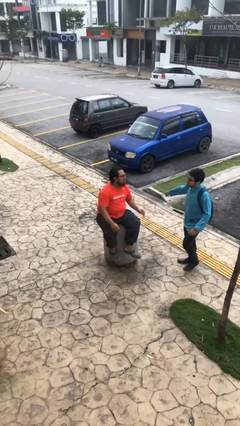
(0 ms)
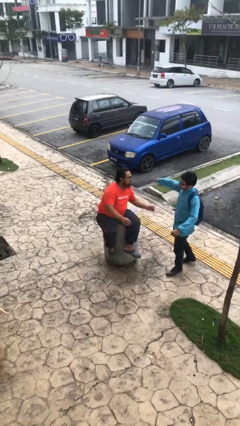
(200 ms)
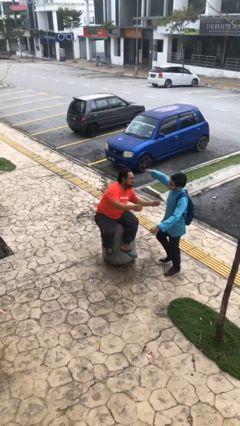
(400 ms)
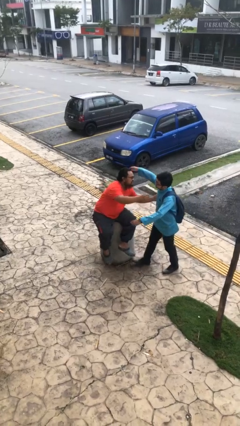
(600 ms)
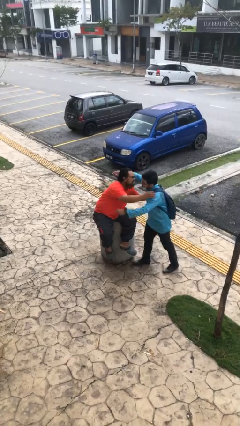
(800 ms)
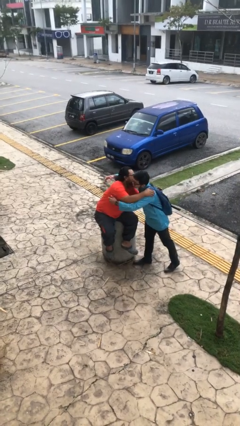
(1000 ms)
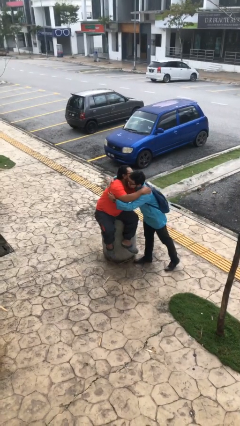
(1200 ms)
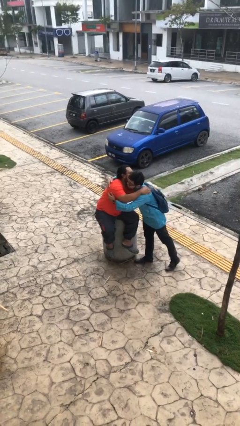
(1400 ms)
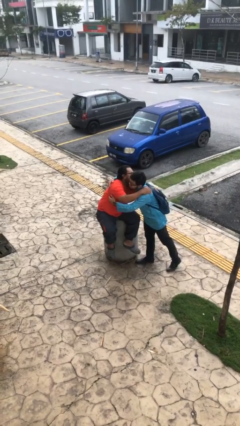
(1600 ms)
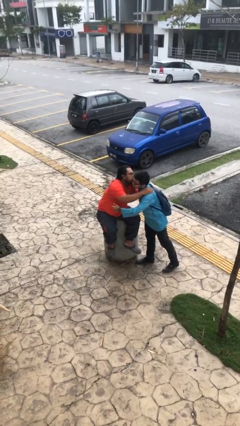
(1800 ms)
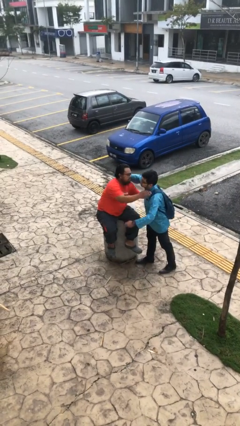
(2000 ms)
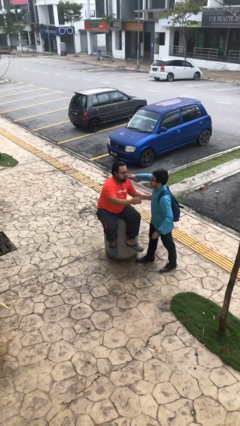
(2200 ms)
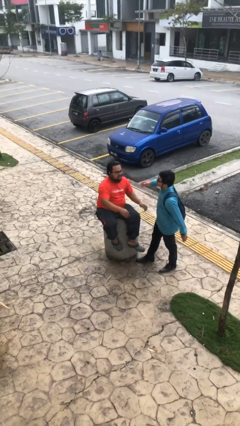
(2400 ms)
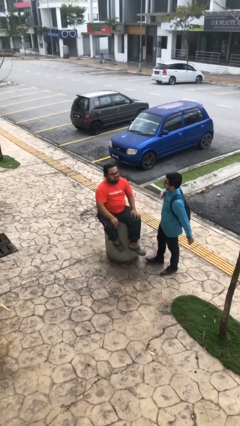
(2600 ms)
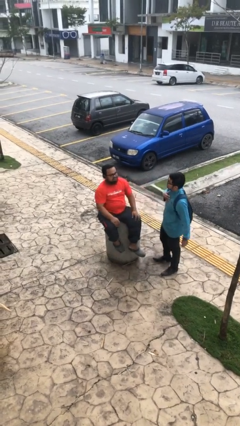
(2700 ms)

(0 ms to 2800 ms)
person embraces person

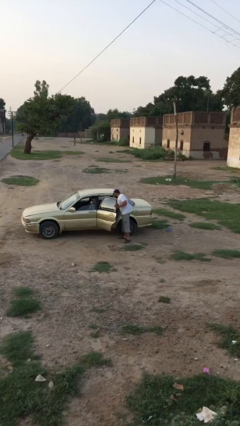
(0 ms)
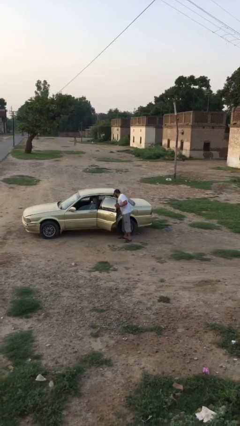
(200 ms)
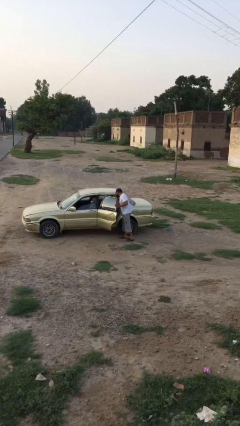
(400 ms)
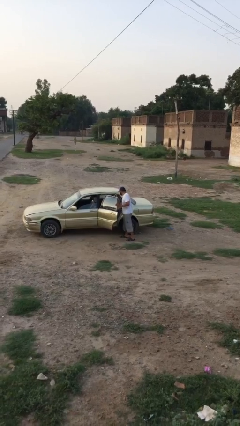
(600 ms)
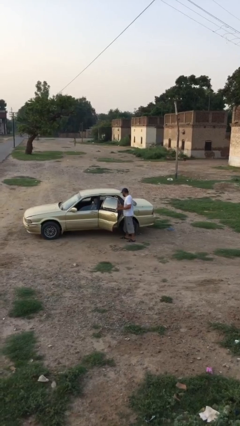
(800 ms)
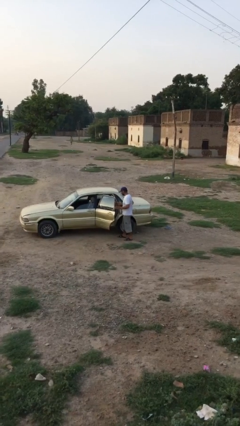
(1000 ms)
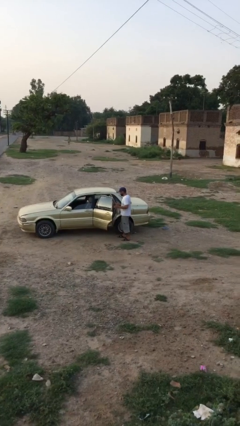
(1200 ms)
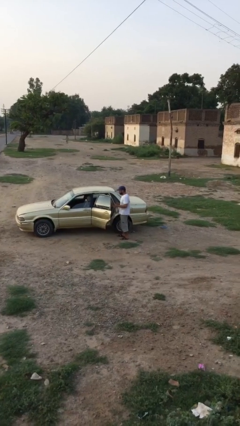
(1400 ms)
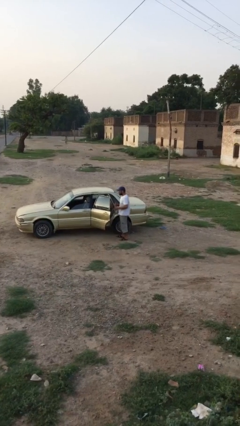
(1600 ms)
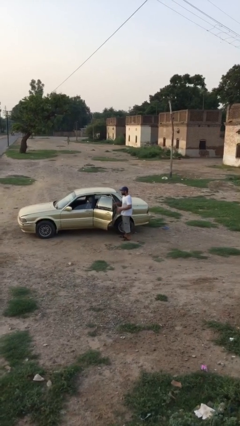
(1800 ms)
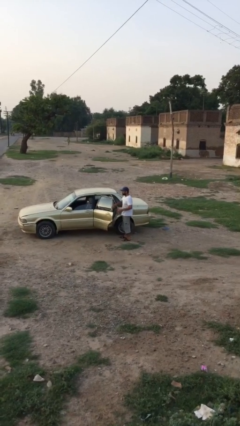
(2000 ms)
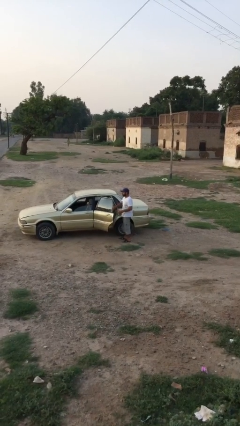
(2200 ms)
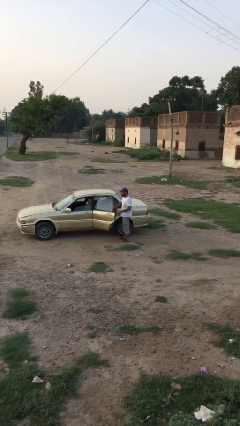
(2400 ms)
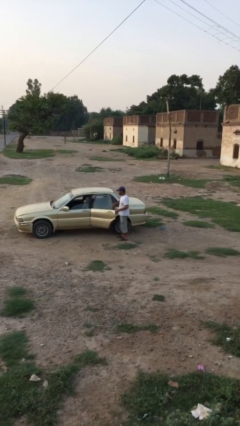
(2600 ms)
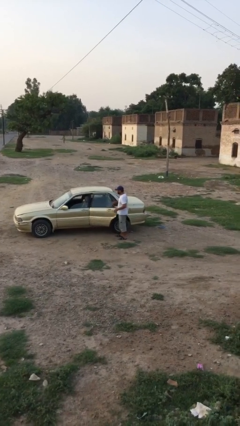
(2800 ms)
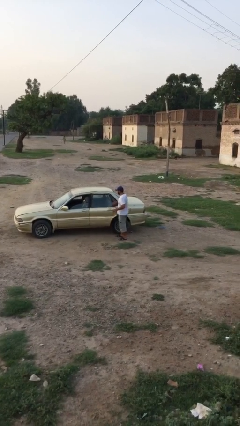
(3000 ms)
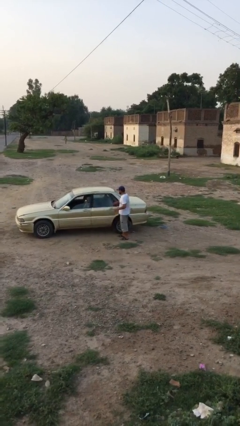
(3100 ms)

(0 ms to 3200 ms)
person closes car door

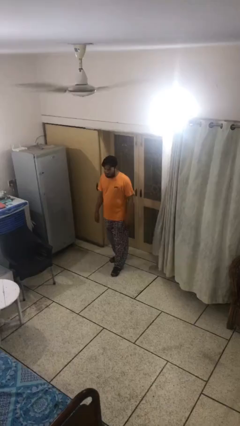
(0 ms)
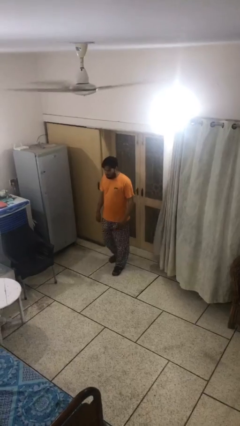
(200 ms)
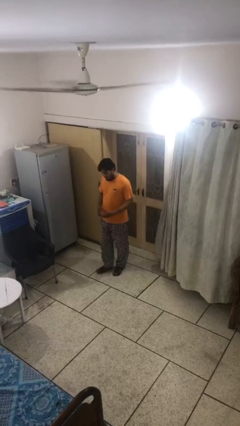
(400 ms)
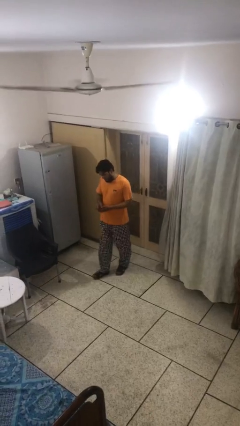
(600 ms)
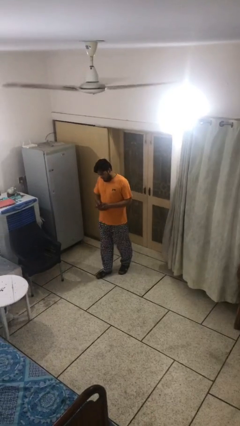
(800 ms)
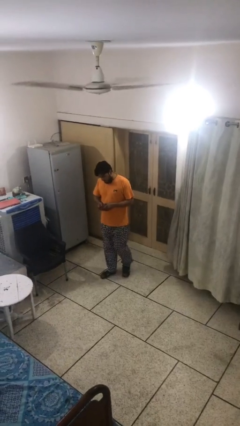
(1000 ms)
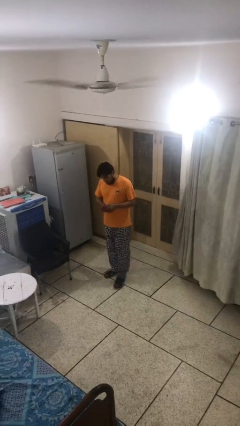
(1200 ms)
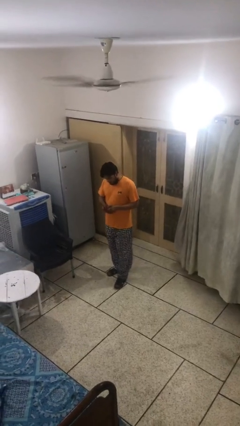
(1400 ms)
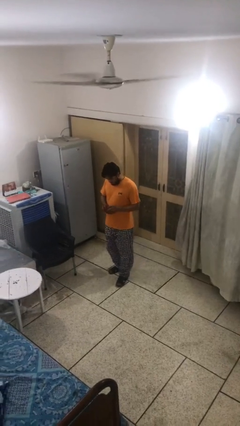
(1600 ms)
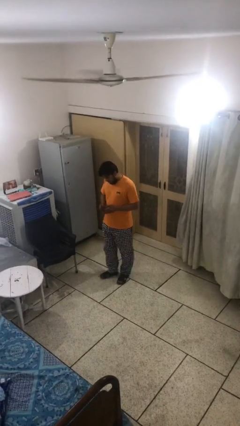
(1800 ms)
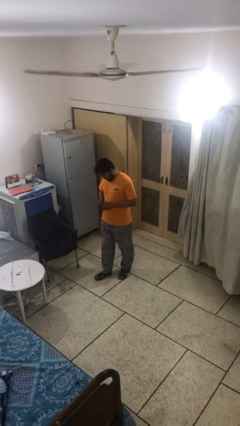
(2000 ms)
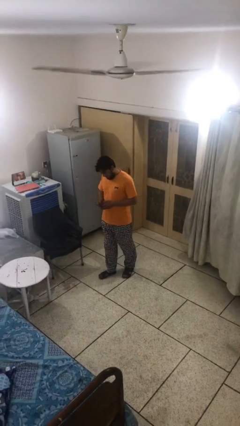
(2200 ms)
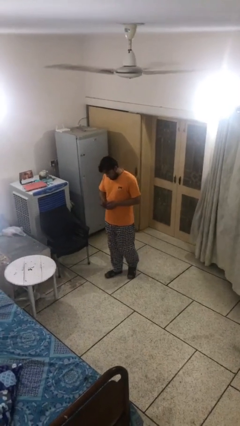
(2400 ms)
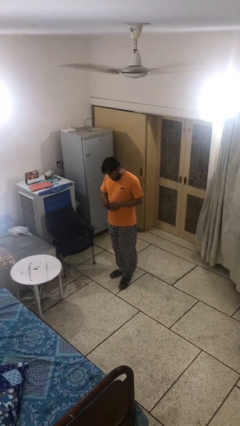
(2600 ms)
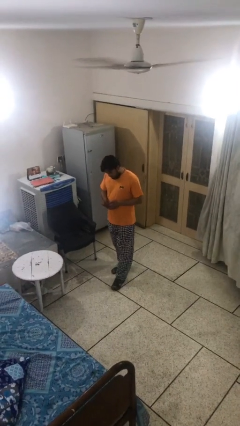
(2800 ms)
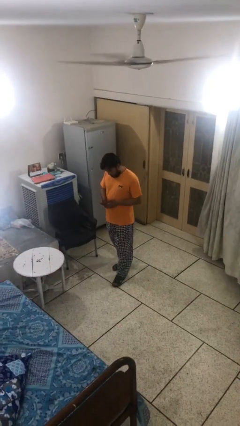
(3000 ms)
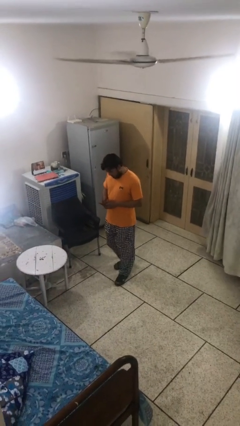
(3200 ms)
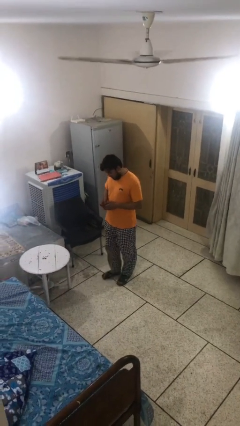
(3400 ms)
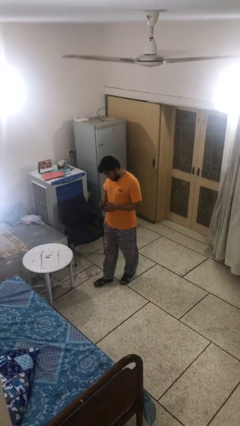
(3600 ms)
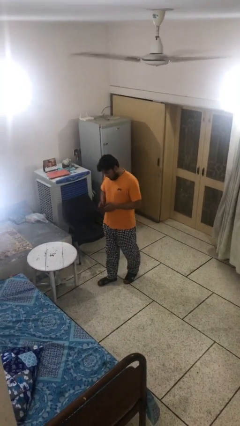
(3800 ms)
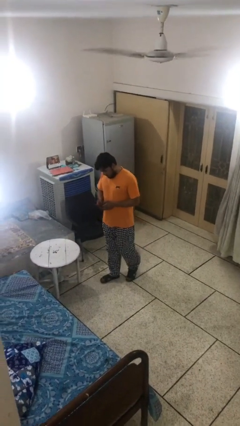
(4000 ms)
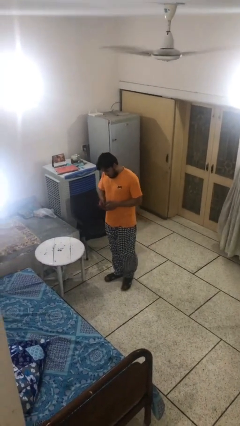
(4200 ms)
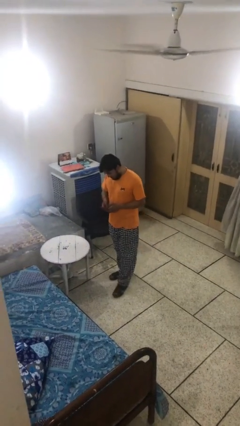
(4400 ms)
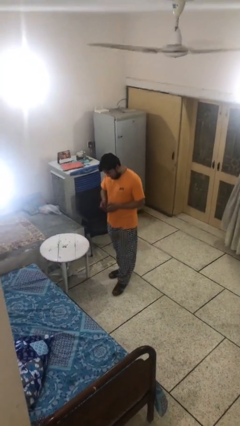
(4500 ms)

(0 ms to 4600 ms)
person texts on phone

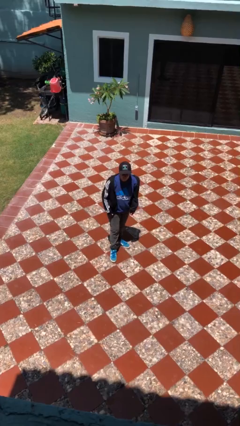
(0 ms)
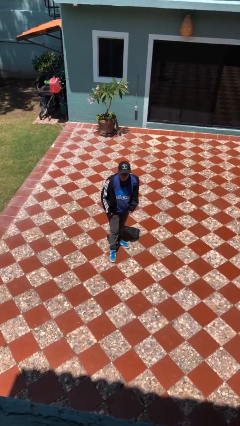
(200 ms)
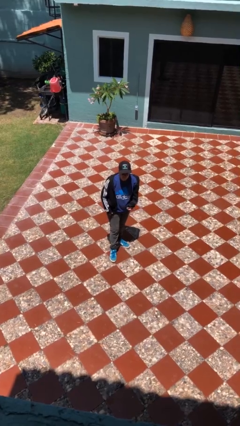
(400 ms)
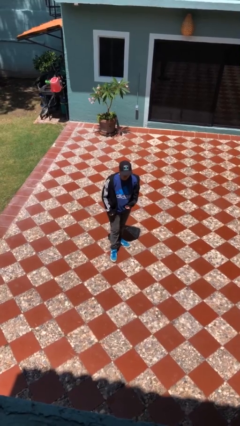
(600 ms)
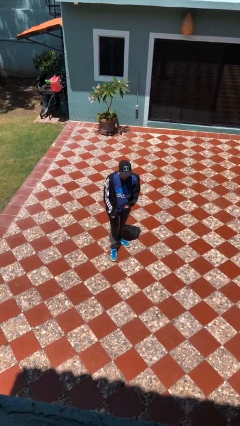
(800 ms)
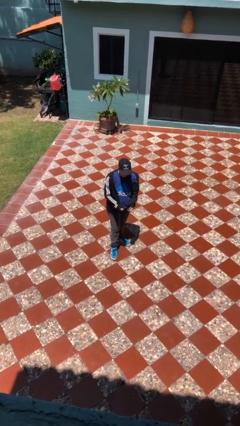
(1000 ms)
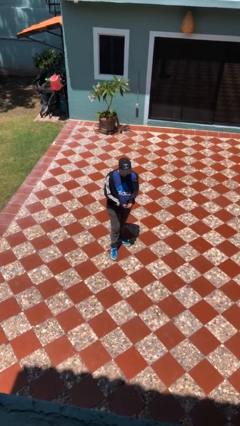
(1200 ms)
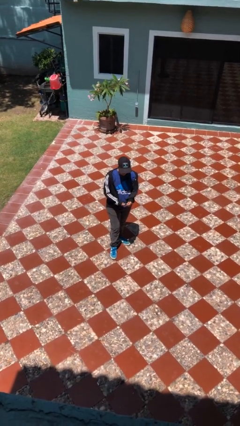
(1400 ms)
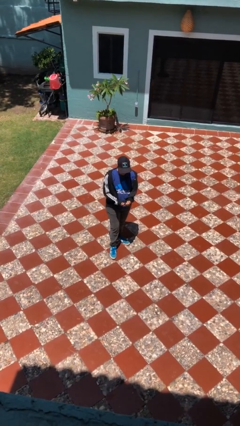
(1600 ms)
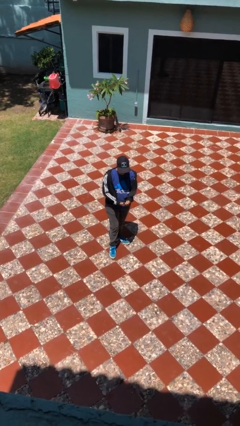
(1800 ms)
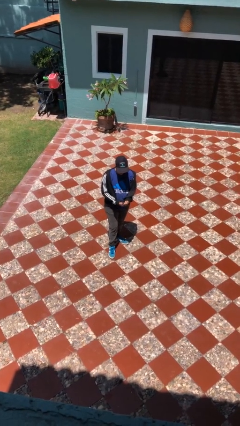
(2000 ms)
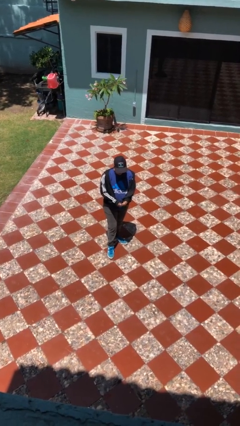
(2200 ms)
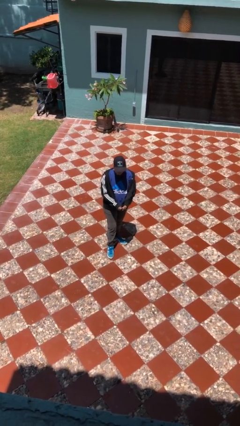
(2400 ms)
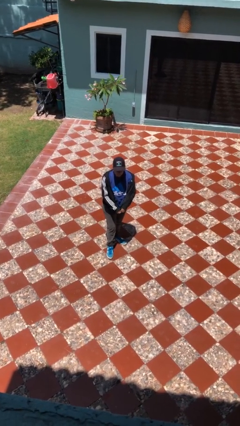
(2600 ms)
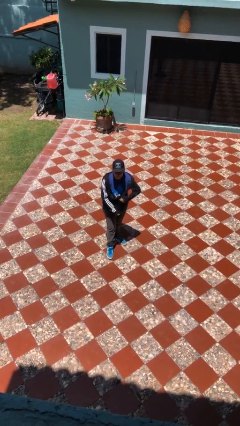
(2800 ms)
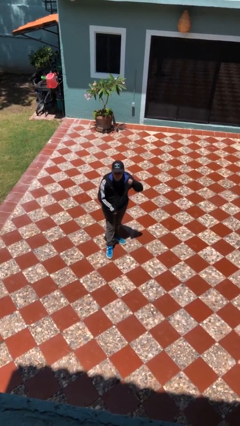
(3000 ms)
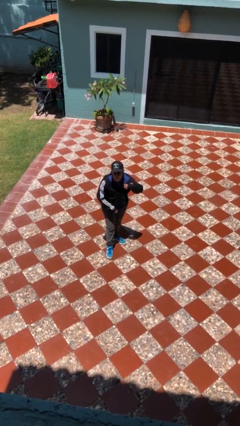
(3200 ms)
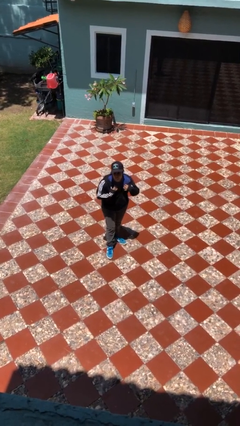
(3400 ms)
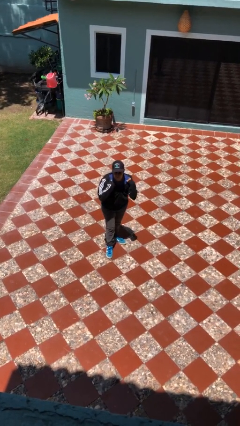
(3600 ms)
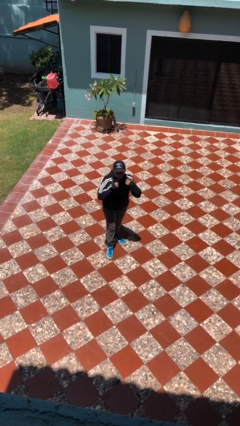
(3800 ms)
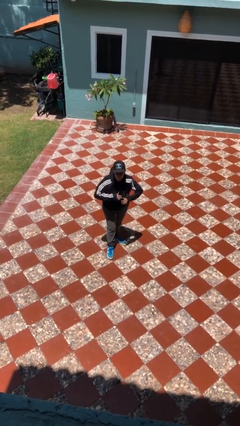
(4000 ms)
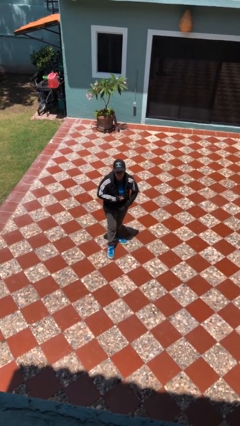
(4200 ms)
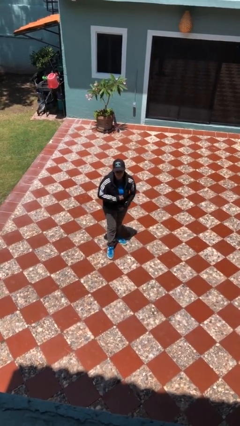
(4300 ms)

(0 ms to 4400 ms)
person zips up jacket

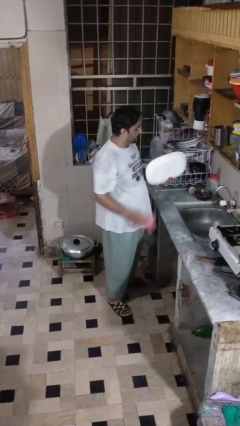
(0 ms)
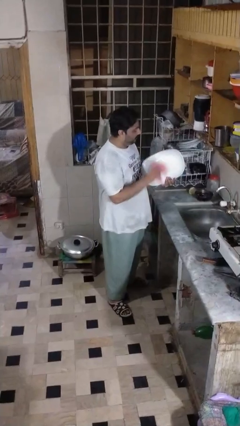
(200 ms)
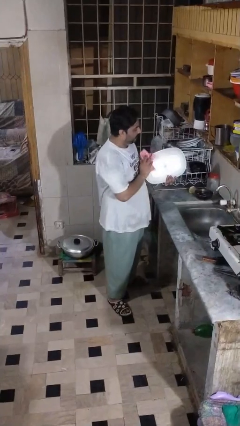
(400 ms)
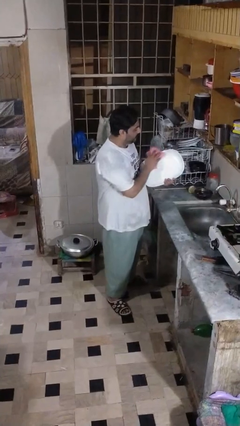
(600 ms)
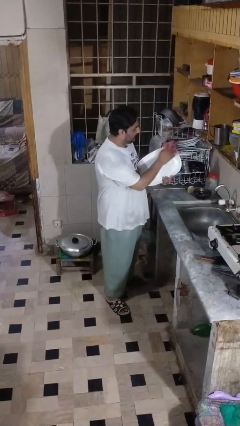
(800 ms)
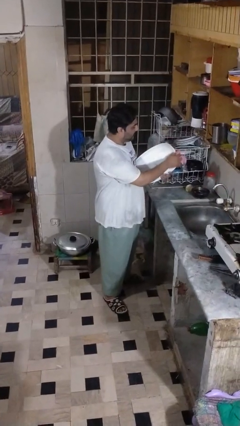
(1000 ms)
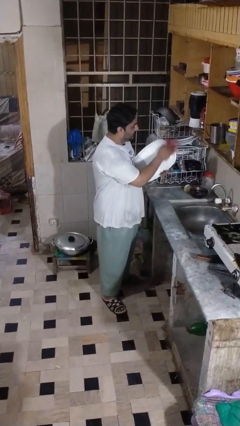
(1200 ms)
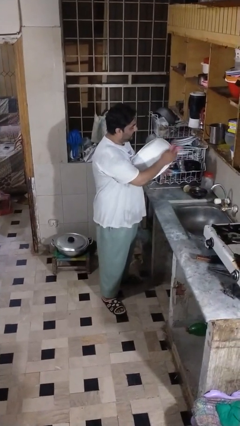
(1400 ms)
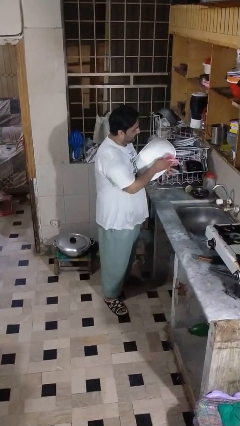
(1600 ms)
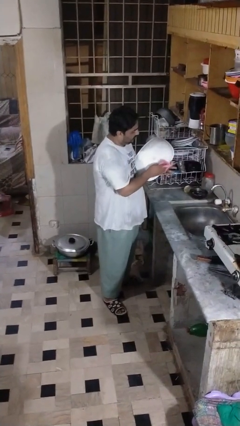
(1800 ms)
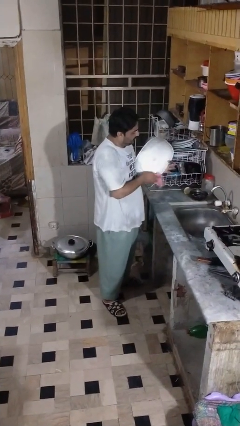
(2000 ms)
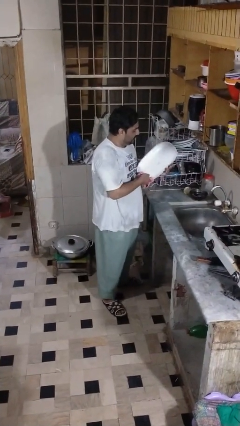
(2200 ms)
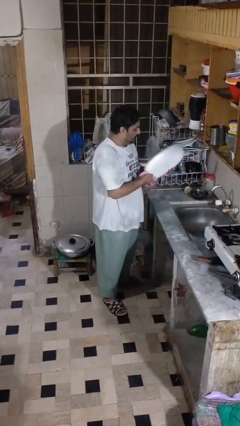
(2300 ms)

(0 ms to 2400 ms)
person dries dish
